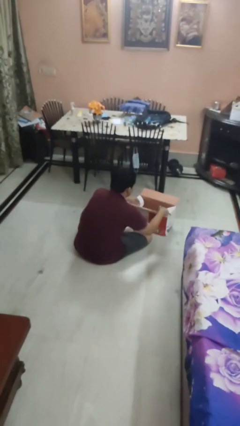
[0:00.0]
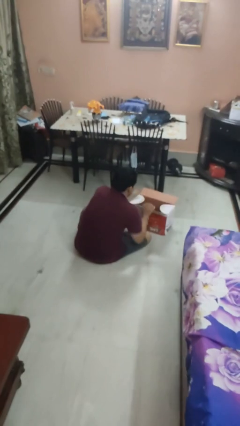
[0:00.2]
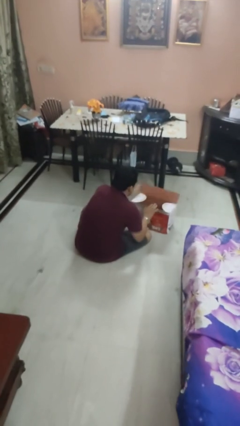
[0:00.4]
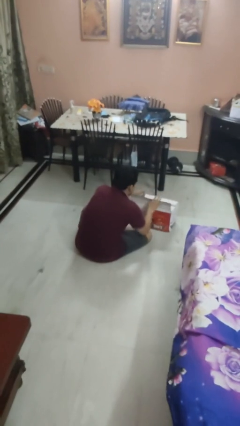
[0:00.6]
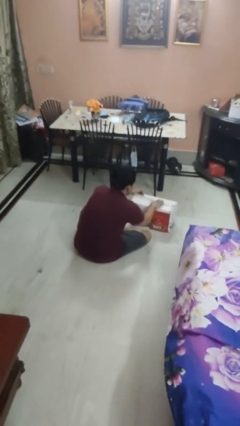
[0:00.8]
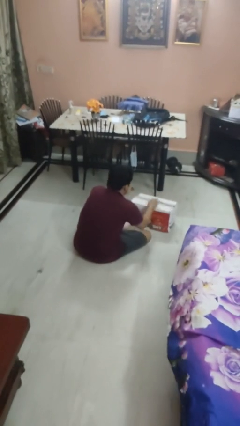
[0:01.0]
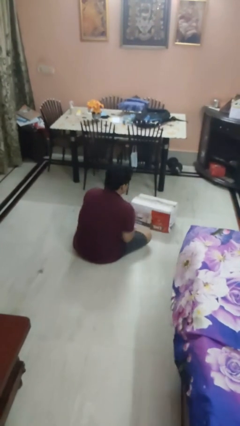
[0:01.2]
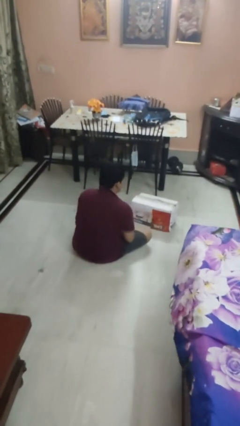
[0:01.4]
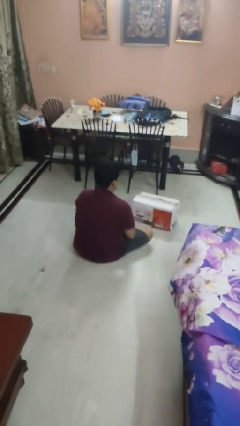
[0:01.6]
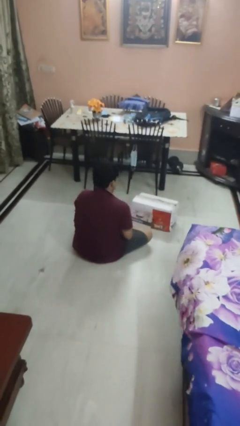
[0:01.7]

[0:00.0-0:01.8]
person closes box

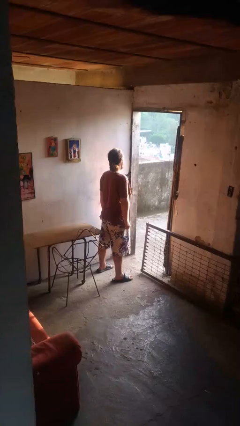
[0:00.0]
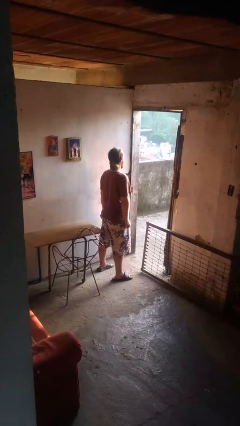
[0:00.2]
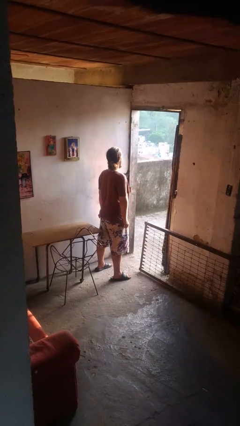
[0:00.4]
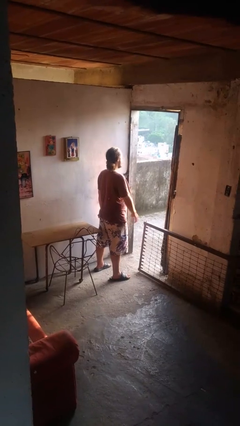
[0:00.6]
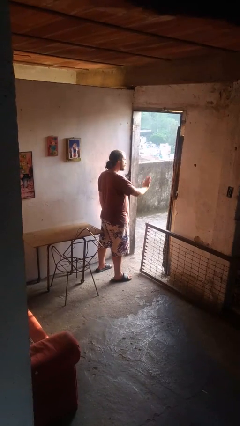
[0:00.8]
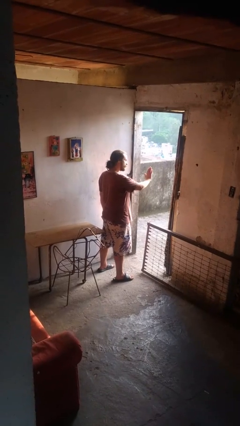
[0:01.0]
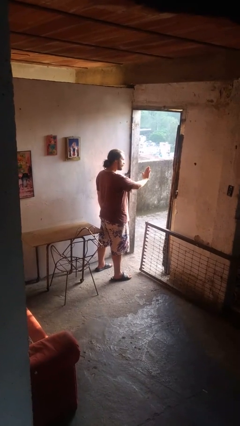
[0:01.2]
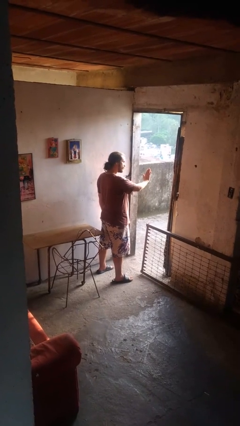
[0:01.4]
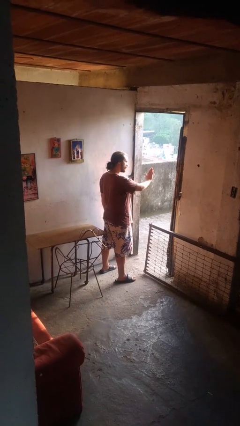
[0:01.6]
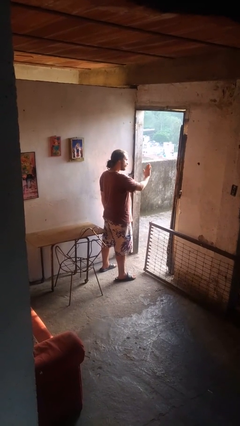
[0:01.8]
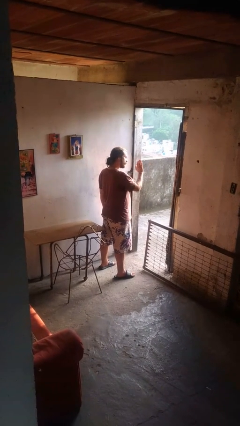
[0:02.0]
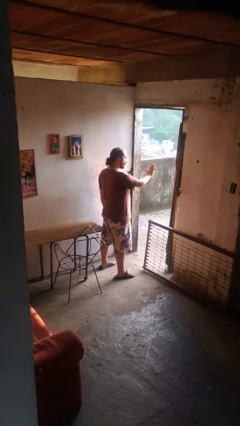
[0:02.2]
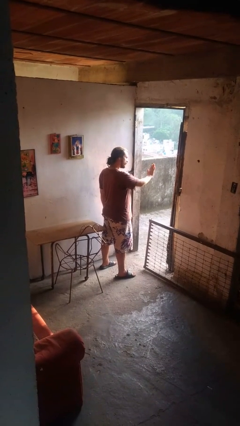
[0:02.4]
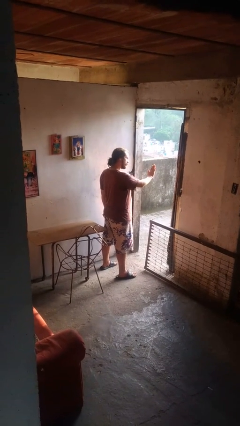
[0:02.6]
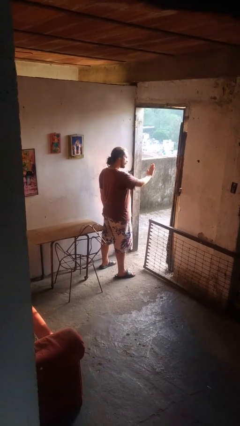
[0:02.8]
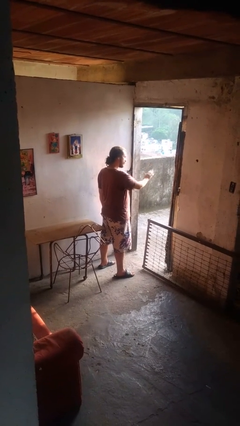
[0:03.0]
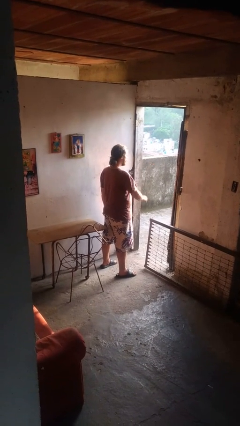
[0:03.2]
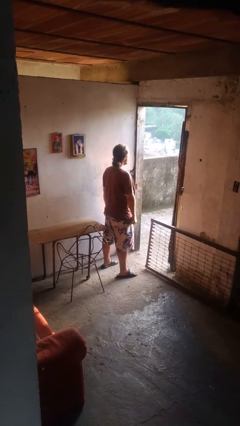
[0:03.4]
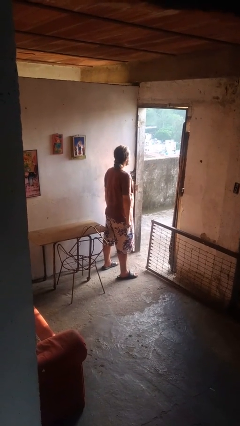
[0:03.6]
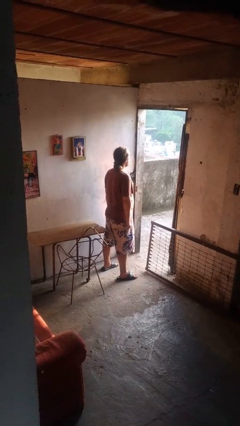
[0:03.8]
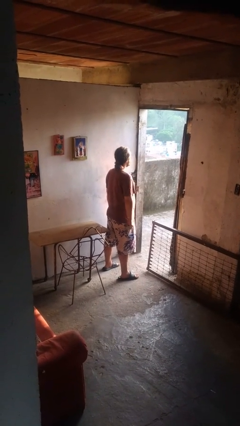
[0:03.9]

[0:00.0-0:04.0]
person gestures stop

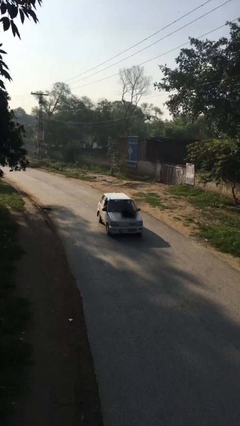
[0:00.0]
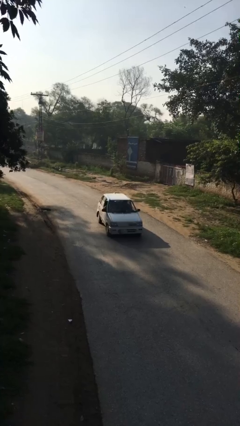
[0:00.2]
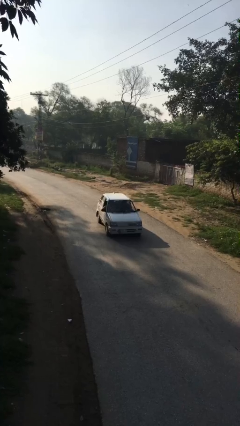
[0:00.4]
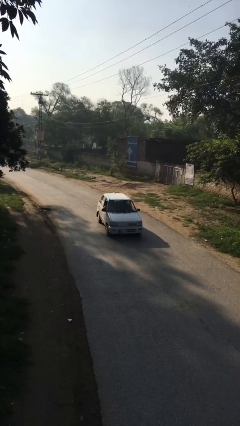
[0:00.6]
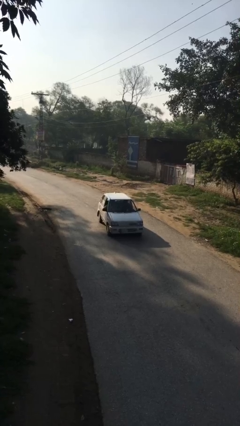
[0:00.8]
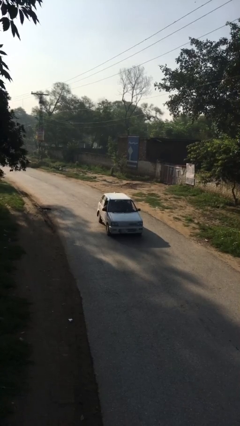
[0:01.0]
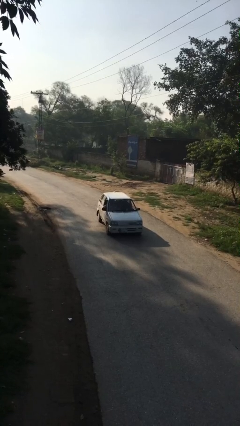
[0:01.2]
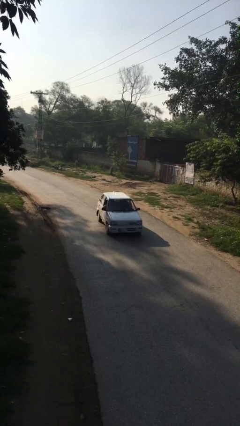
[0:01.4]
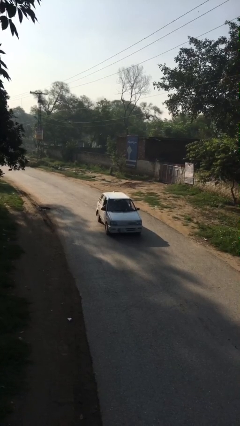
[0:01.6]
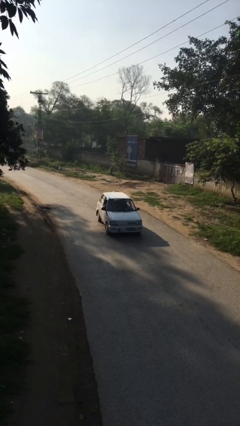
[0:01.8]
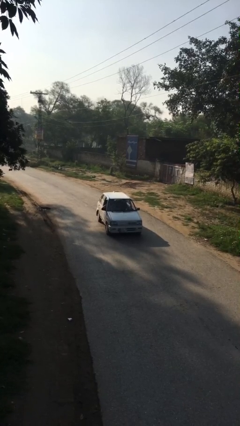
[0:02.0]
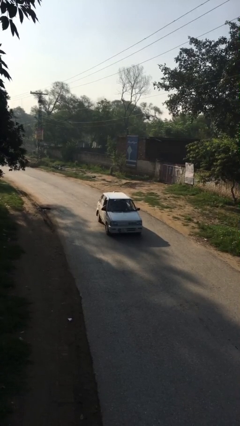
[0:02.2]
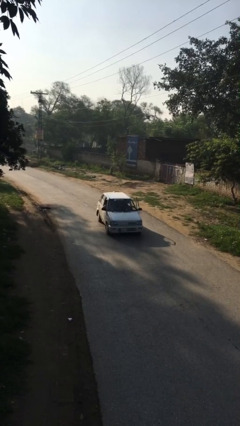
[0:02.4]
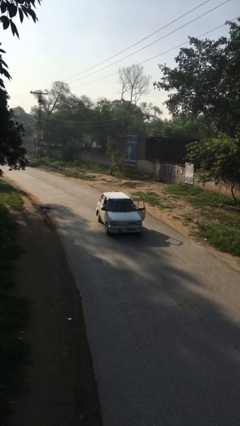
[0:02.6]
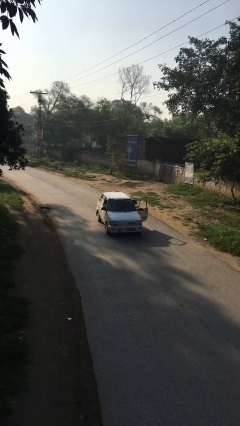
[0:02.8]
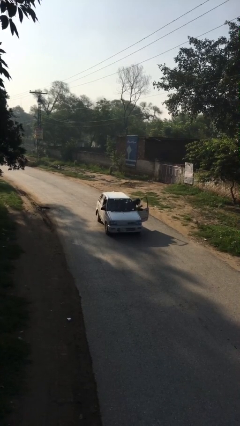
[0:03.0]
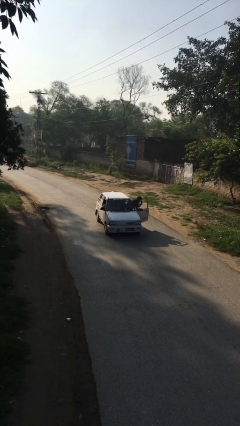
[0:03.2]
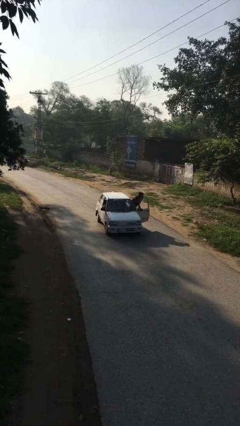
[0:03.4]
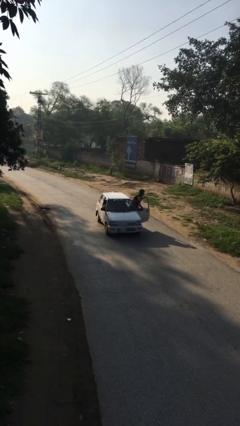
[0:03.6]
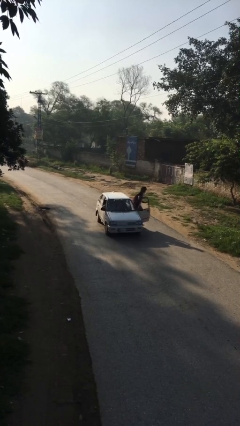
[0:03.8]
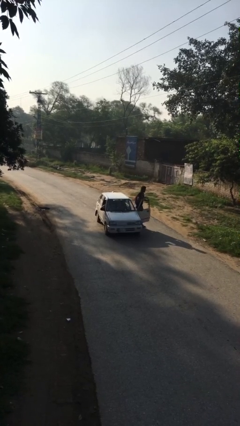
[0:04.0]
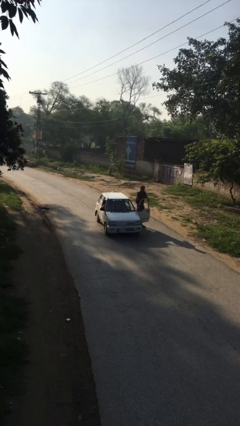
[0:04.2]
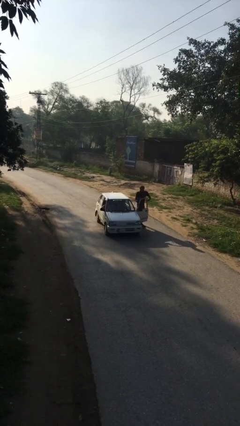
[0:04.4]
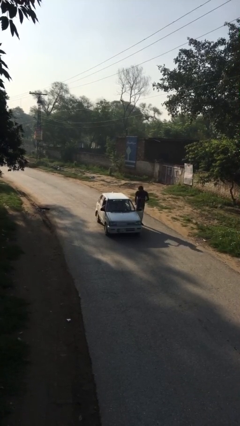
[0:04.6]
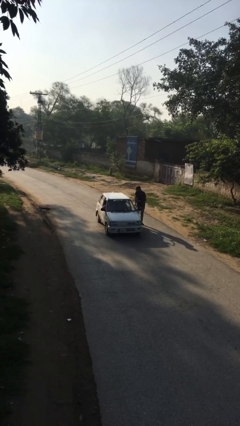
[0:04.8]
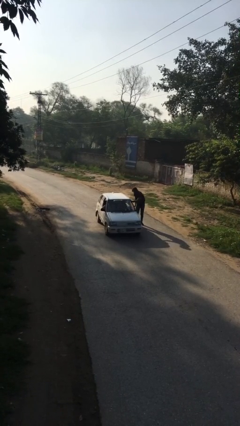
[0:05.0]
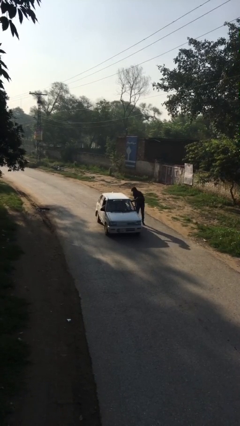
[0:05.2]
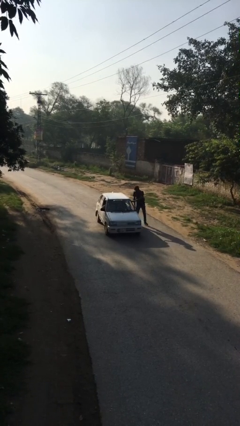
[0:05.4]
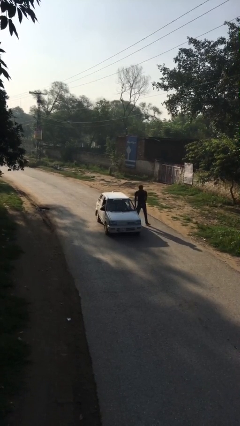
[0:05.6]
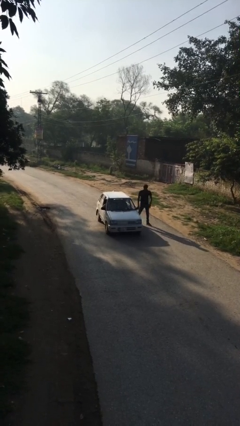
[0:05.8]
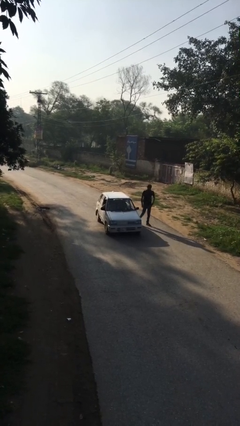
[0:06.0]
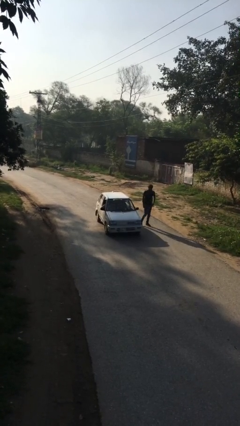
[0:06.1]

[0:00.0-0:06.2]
car drops off person

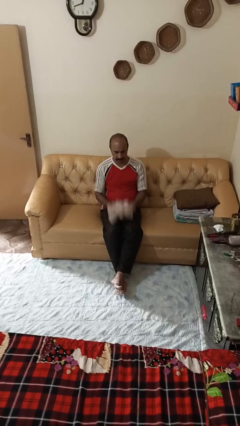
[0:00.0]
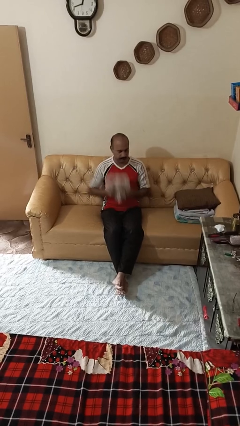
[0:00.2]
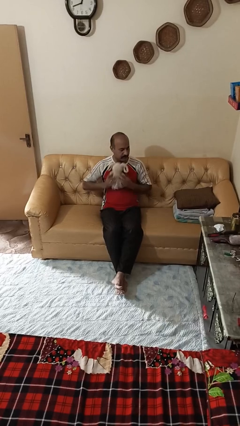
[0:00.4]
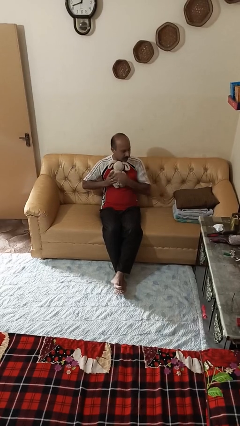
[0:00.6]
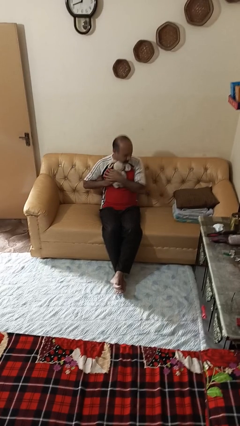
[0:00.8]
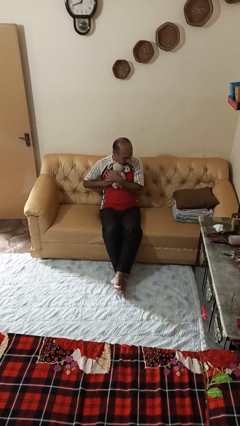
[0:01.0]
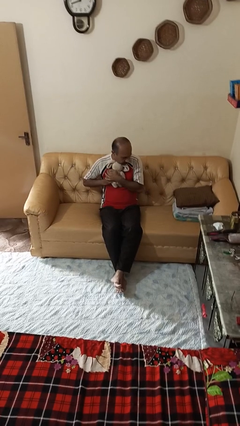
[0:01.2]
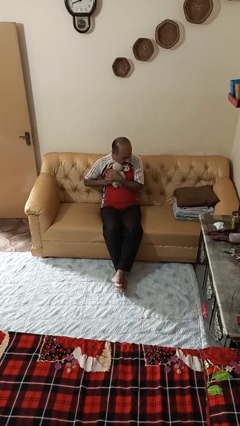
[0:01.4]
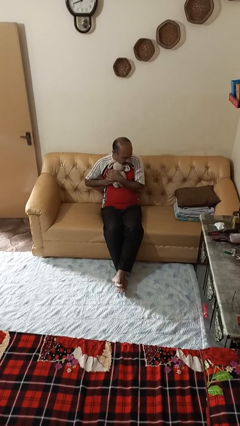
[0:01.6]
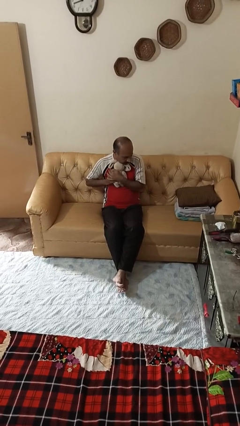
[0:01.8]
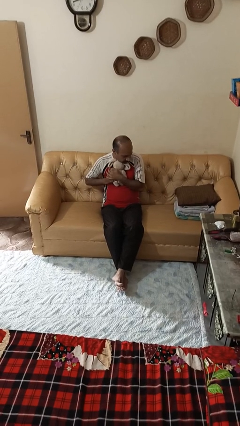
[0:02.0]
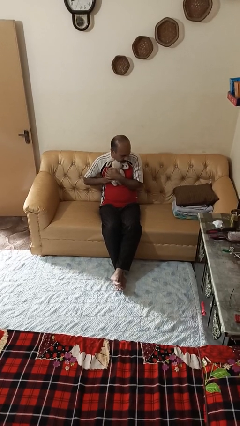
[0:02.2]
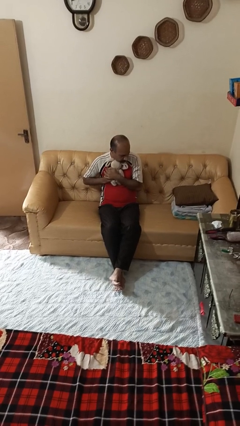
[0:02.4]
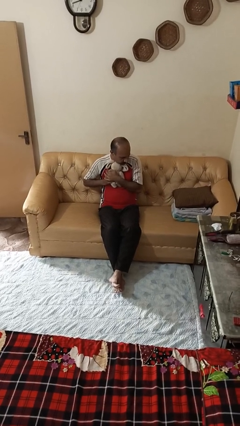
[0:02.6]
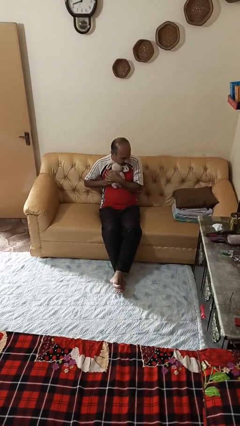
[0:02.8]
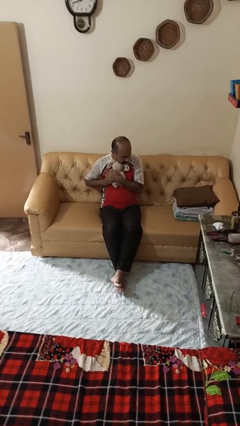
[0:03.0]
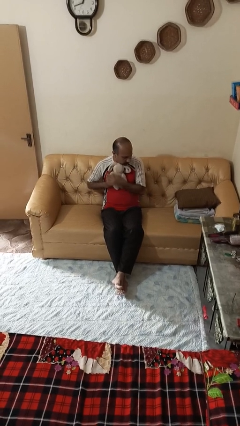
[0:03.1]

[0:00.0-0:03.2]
person hugs stuffed animal

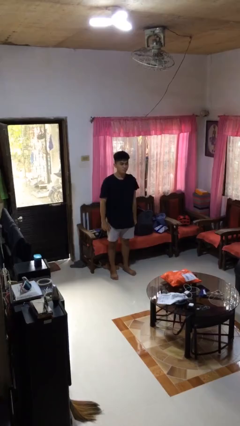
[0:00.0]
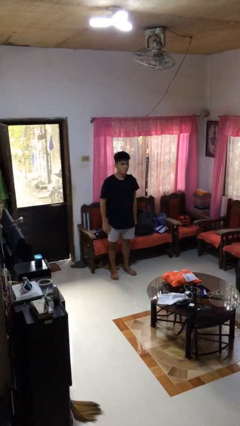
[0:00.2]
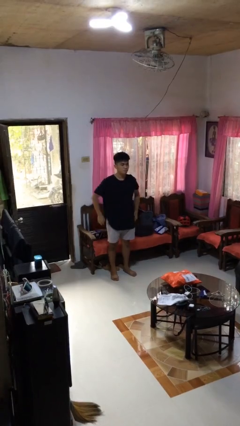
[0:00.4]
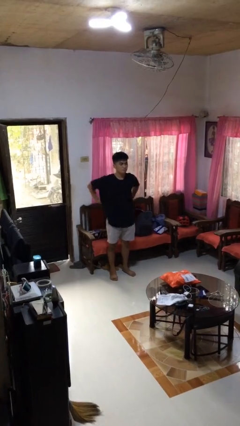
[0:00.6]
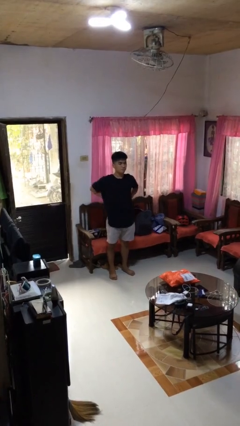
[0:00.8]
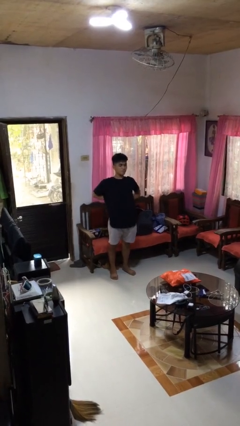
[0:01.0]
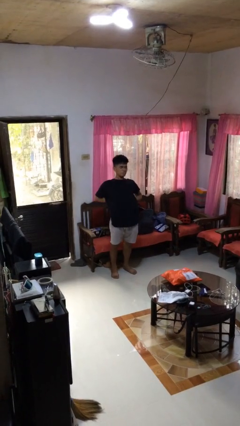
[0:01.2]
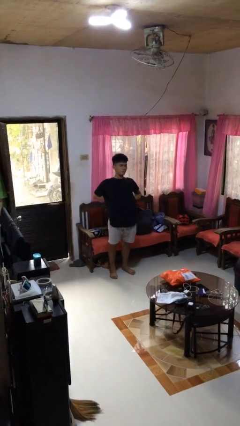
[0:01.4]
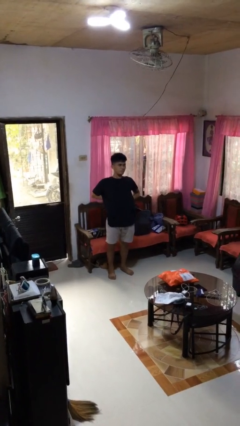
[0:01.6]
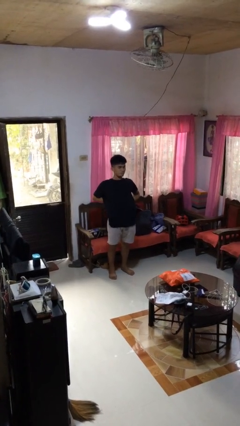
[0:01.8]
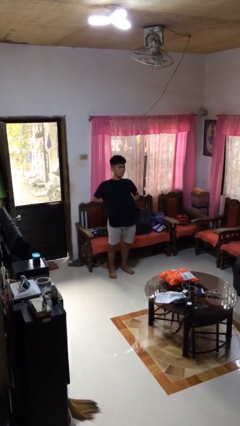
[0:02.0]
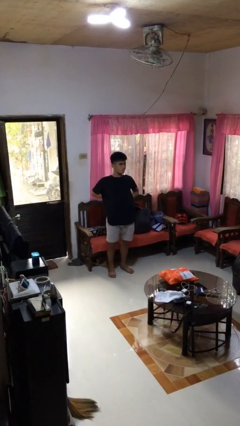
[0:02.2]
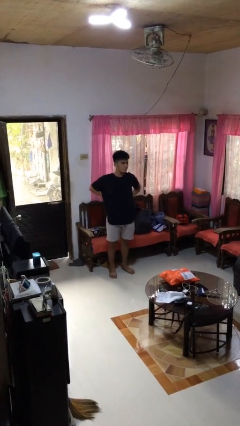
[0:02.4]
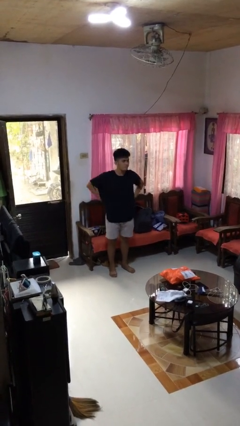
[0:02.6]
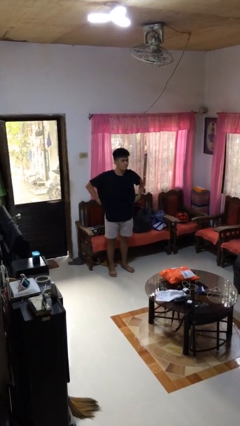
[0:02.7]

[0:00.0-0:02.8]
person stretches back
